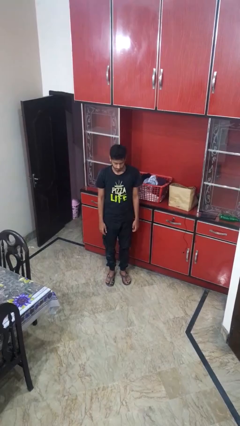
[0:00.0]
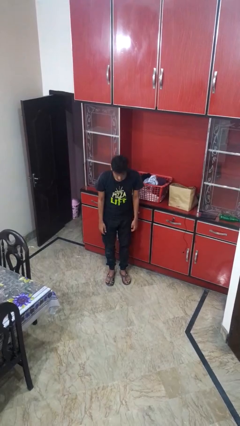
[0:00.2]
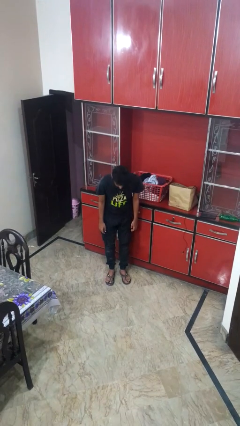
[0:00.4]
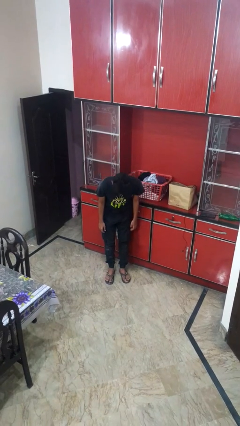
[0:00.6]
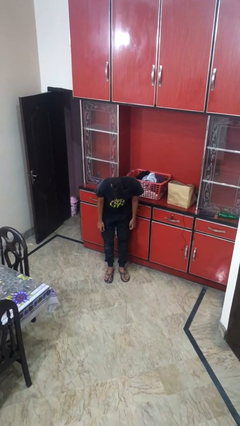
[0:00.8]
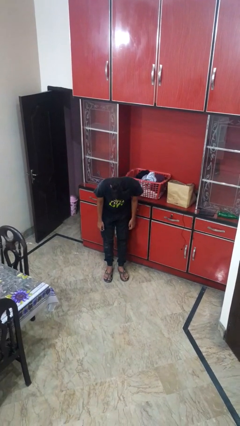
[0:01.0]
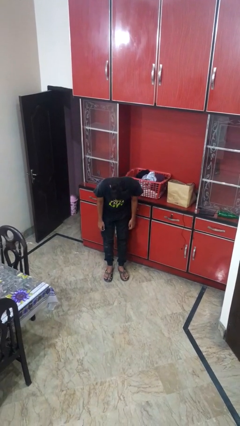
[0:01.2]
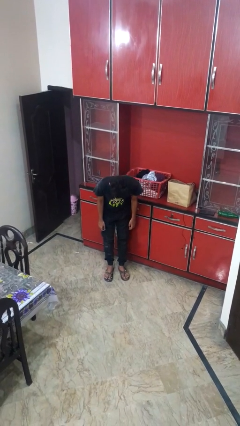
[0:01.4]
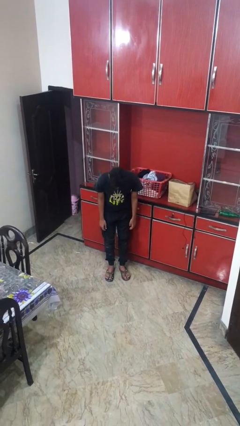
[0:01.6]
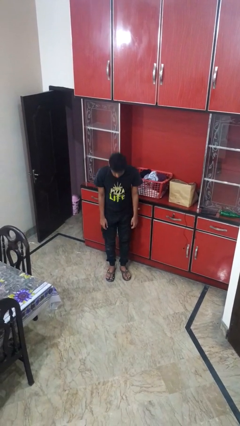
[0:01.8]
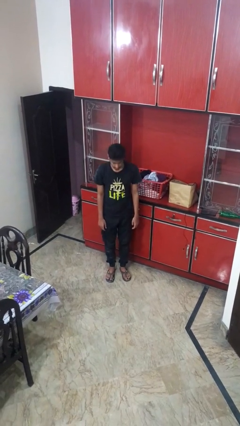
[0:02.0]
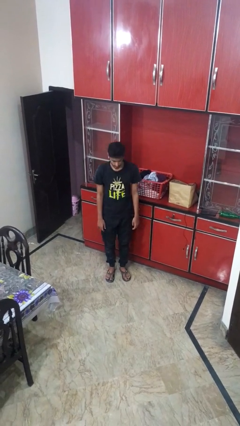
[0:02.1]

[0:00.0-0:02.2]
person bows

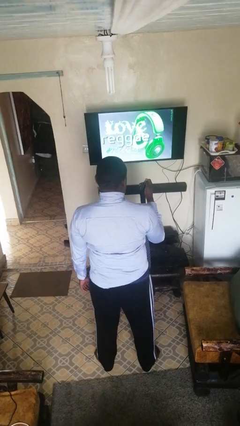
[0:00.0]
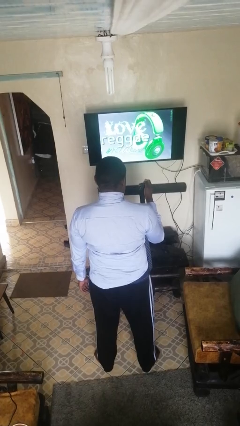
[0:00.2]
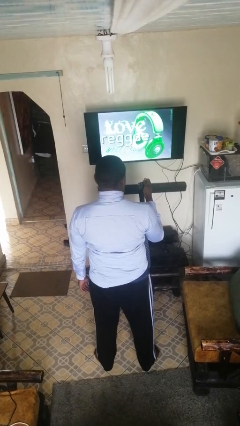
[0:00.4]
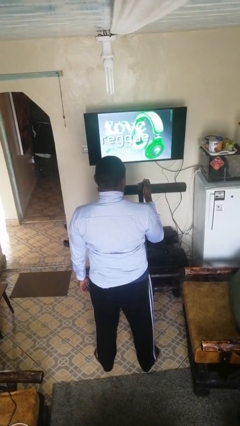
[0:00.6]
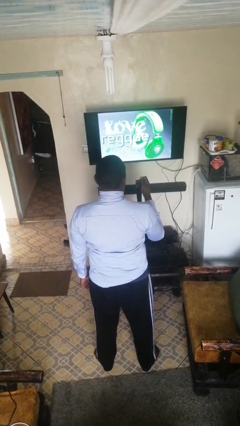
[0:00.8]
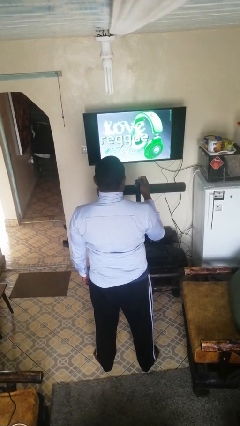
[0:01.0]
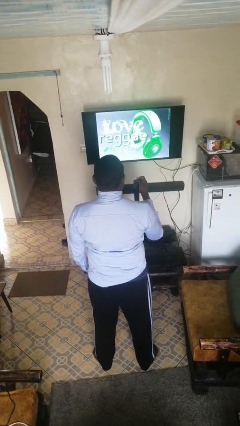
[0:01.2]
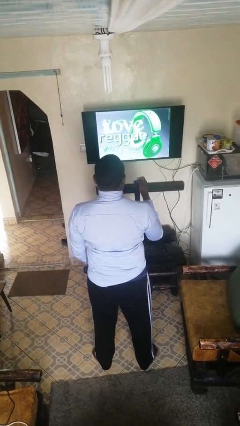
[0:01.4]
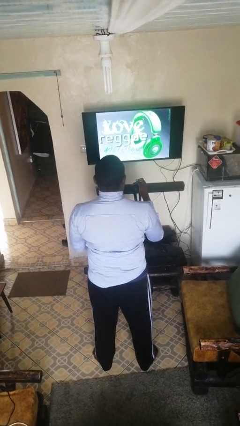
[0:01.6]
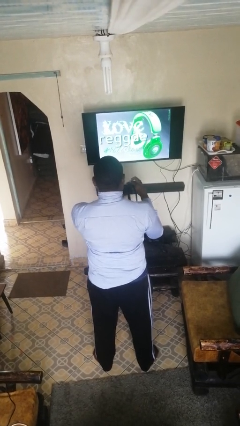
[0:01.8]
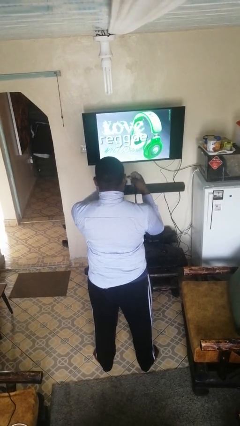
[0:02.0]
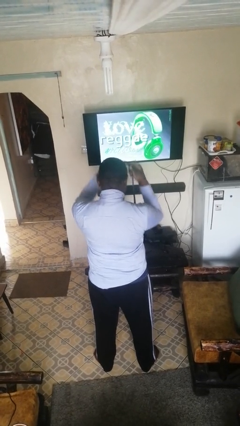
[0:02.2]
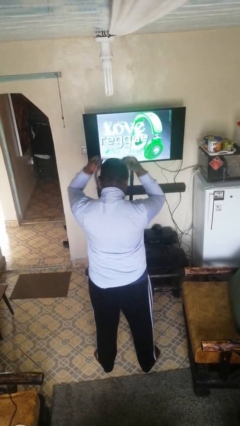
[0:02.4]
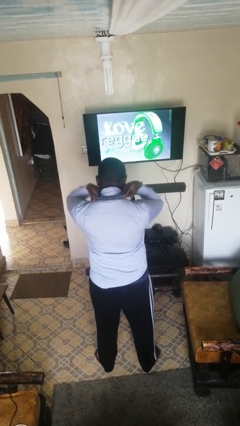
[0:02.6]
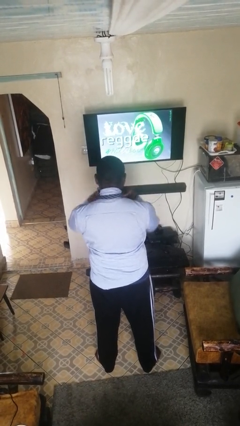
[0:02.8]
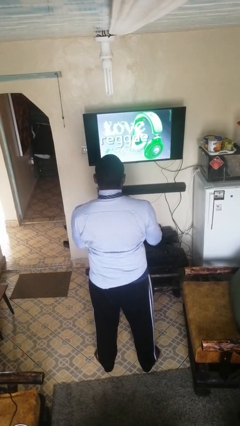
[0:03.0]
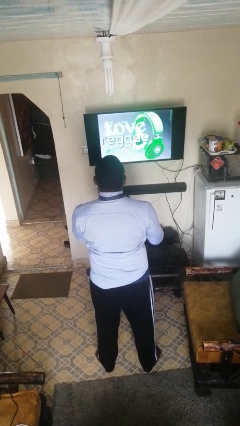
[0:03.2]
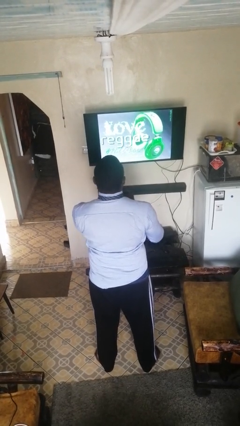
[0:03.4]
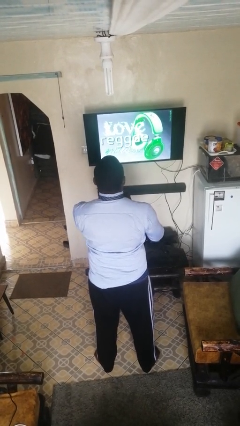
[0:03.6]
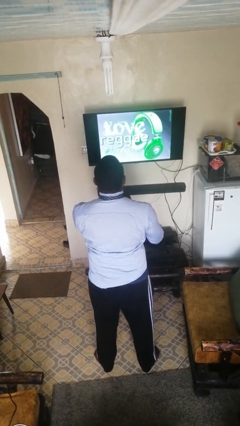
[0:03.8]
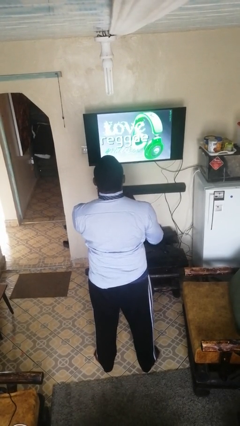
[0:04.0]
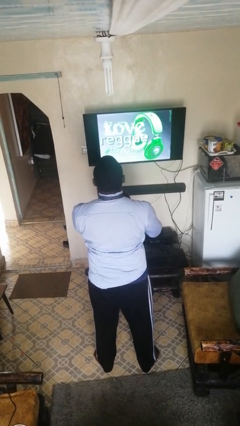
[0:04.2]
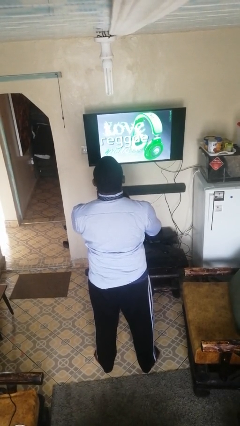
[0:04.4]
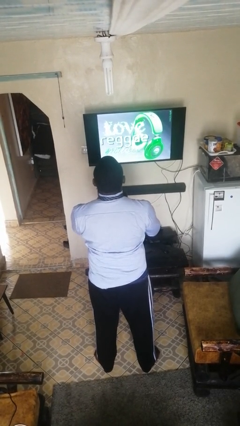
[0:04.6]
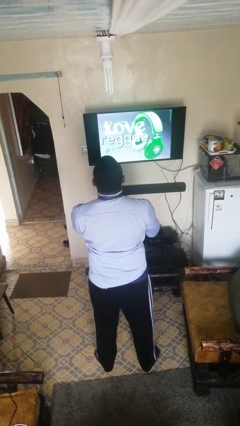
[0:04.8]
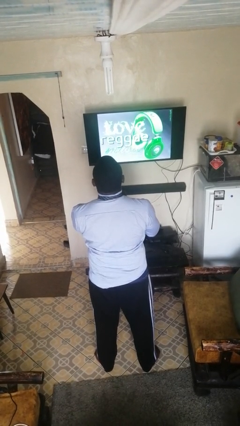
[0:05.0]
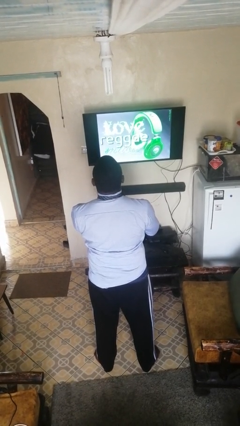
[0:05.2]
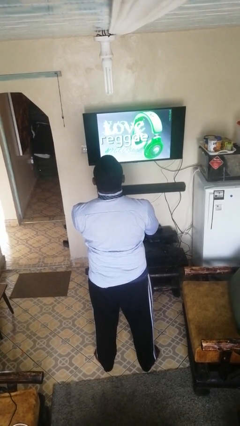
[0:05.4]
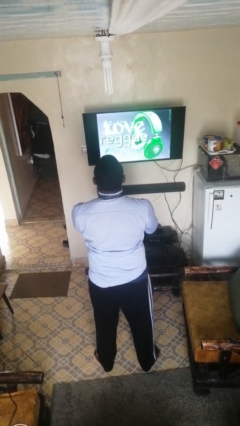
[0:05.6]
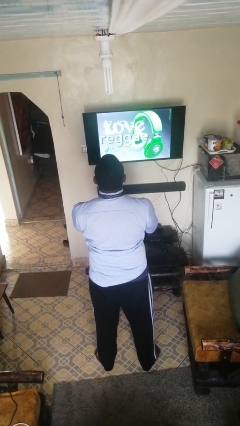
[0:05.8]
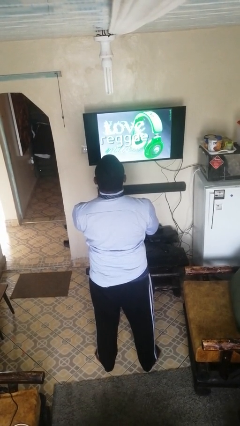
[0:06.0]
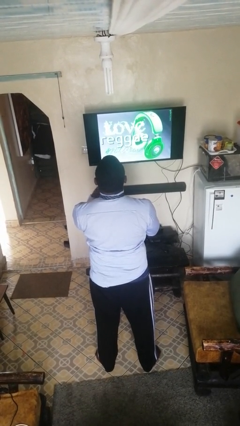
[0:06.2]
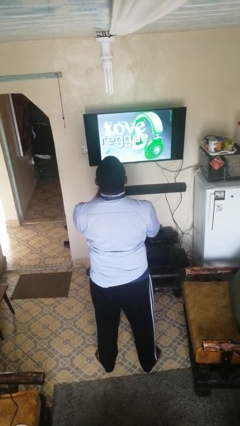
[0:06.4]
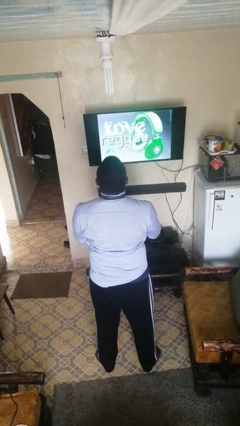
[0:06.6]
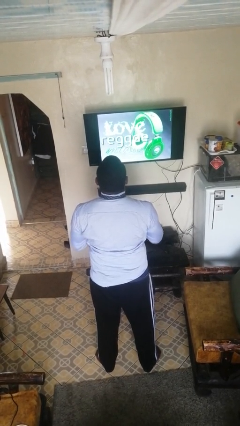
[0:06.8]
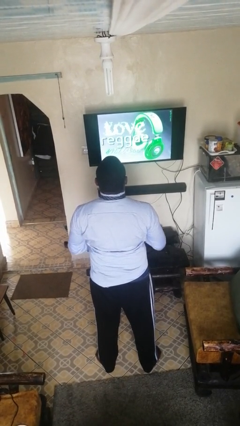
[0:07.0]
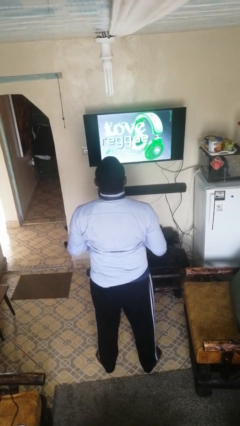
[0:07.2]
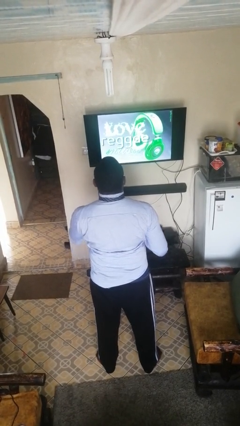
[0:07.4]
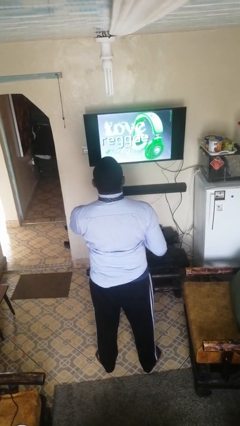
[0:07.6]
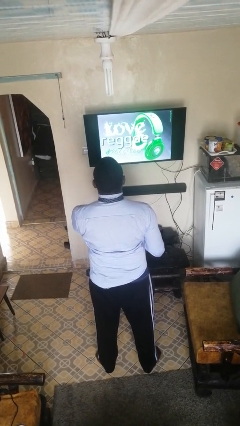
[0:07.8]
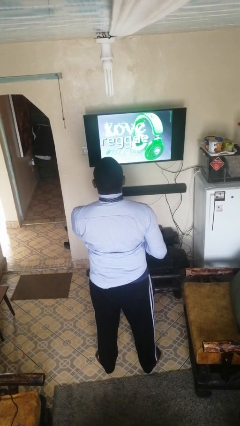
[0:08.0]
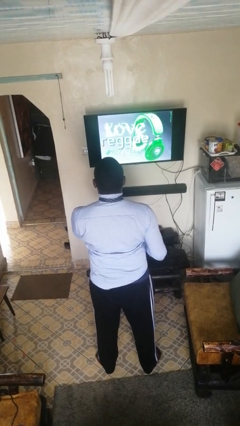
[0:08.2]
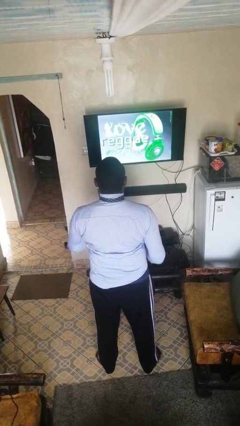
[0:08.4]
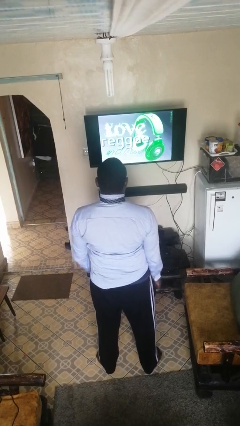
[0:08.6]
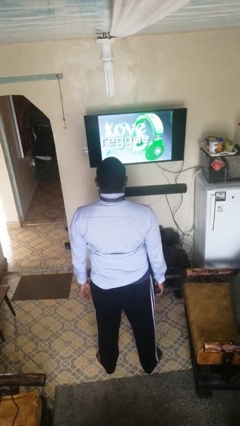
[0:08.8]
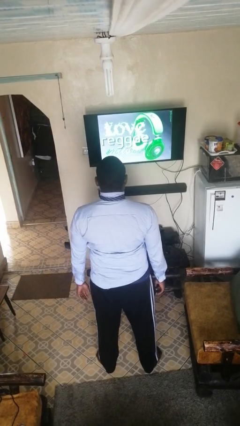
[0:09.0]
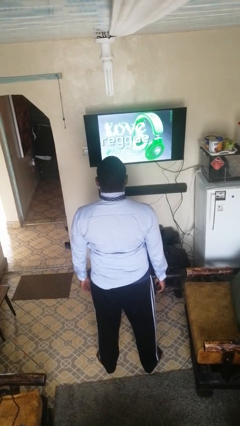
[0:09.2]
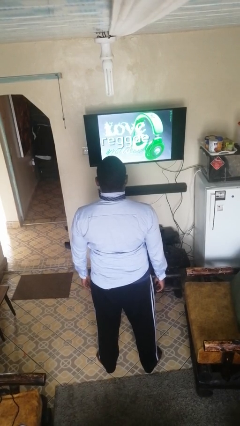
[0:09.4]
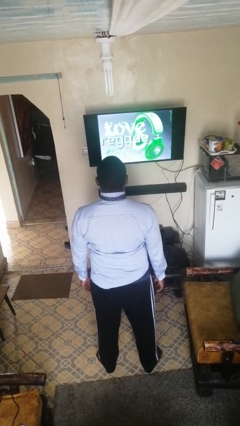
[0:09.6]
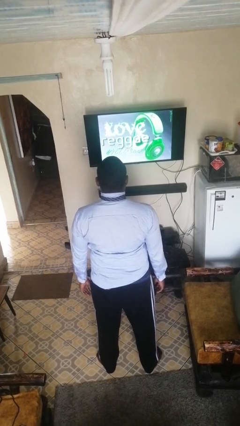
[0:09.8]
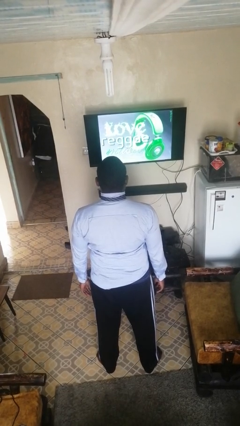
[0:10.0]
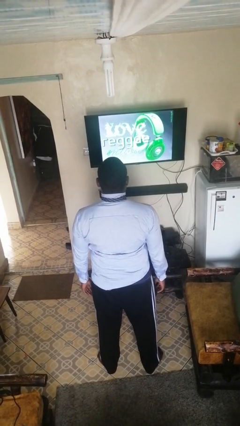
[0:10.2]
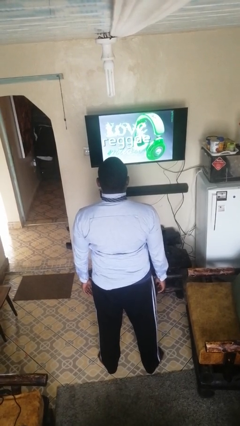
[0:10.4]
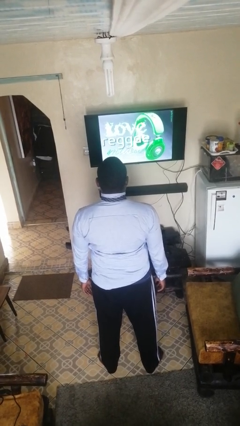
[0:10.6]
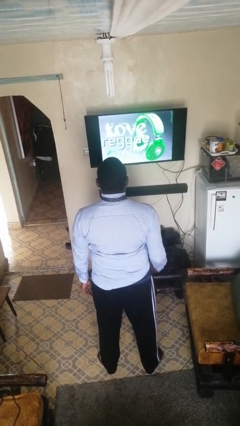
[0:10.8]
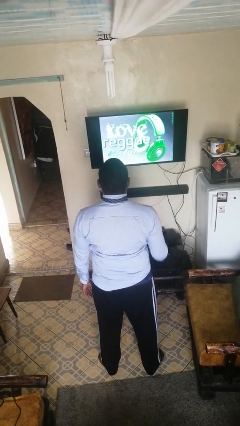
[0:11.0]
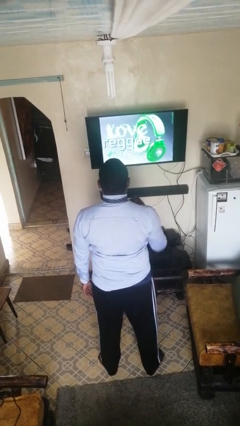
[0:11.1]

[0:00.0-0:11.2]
person puts on necktie

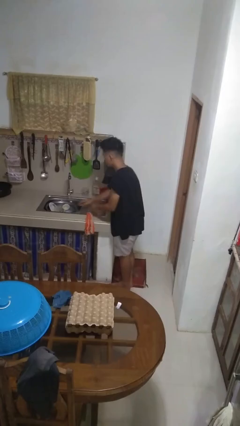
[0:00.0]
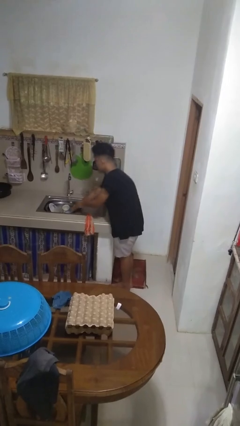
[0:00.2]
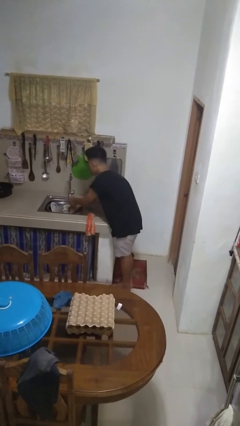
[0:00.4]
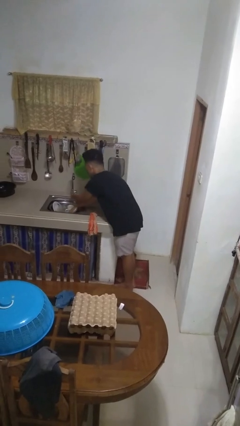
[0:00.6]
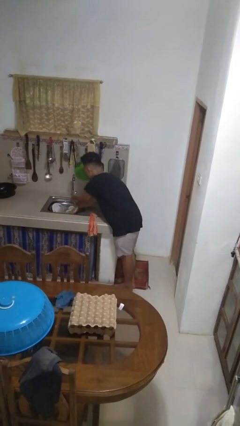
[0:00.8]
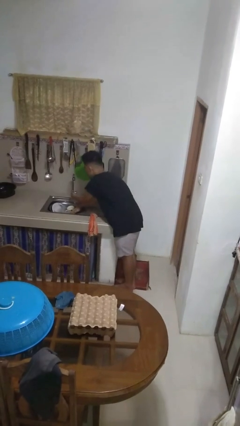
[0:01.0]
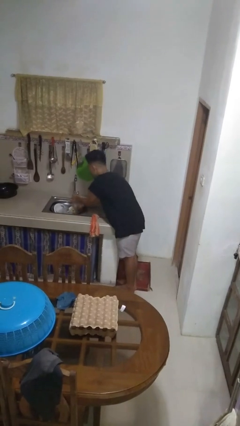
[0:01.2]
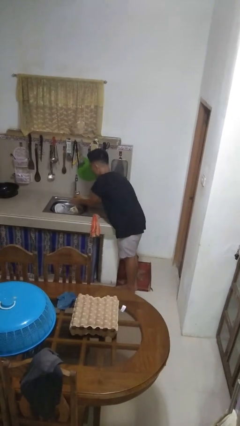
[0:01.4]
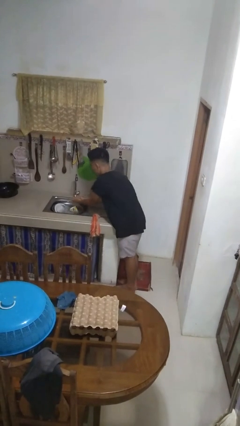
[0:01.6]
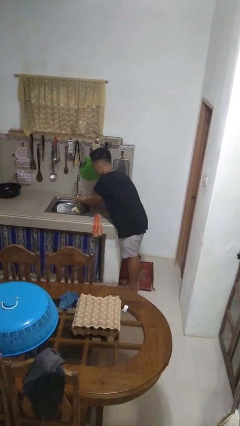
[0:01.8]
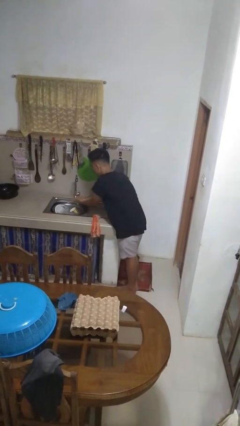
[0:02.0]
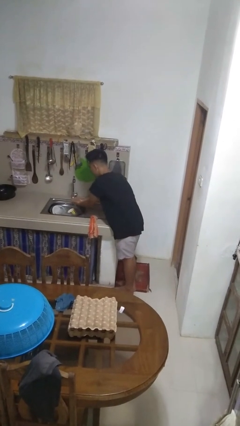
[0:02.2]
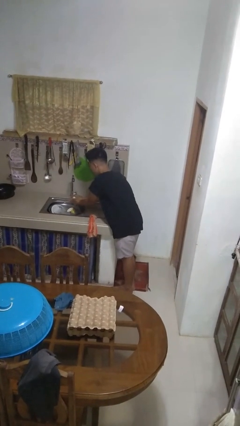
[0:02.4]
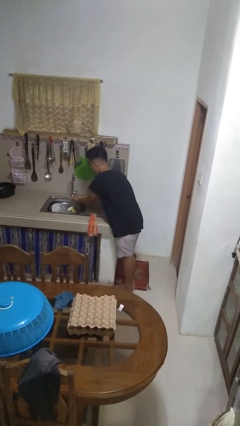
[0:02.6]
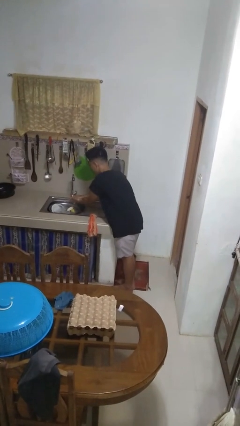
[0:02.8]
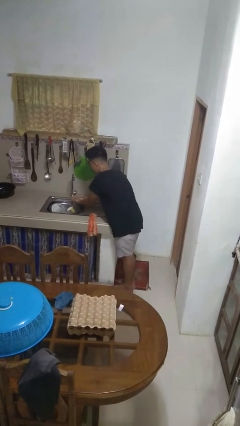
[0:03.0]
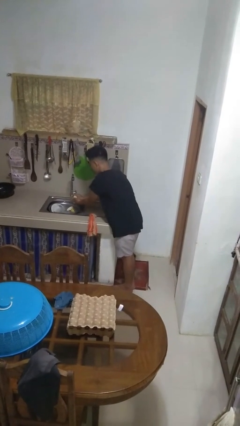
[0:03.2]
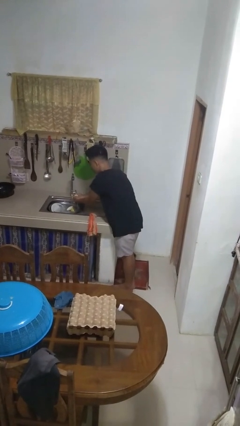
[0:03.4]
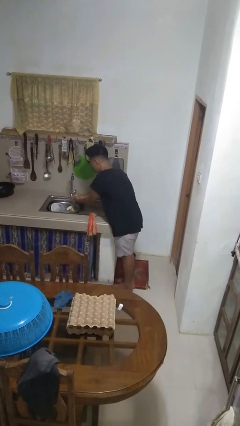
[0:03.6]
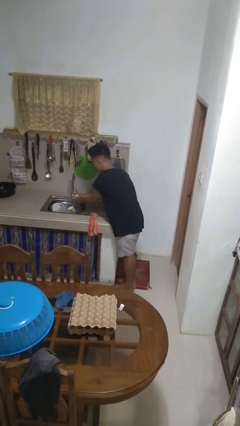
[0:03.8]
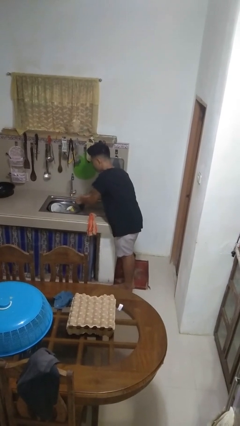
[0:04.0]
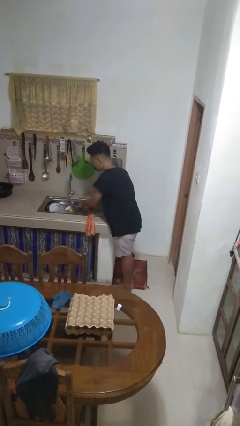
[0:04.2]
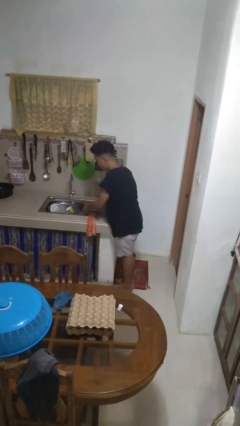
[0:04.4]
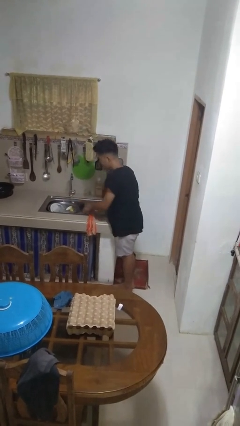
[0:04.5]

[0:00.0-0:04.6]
person washes hands
